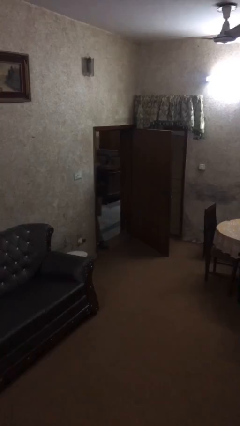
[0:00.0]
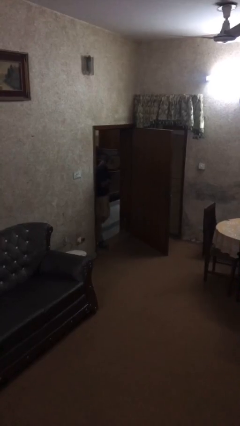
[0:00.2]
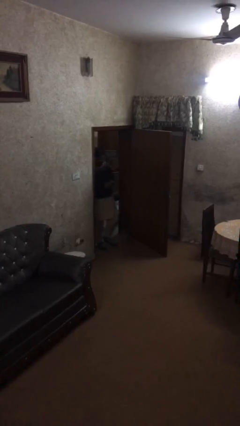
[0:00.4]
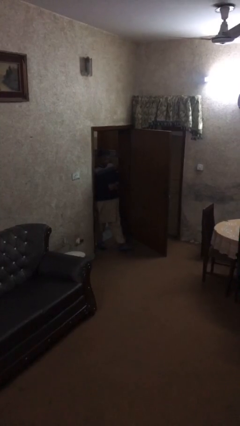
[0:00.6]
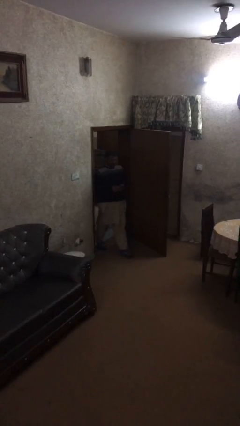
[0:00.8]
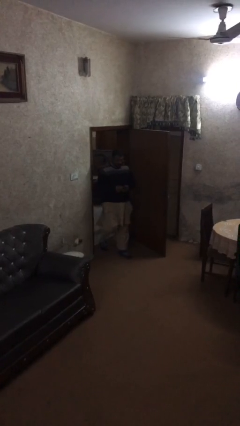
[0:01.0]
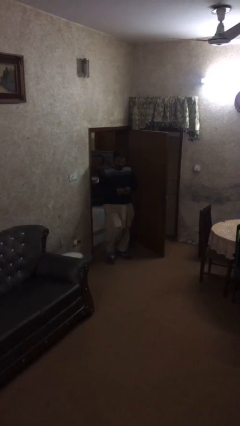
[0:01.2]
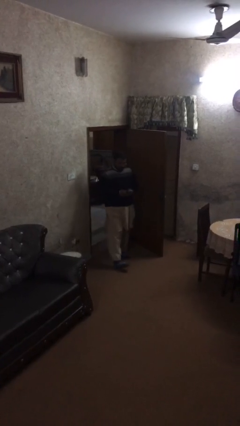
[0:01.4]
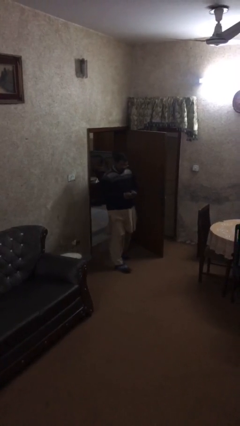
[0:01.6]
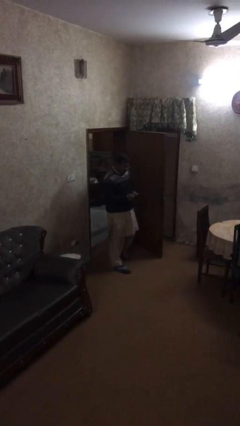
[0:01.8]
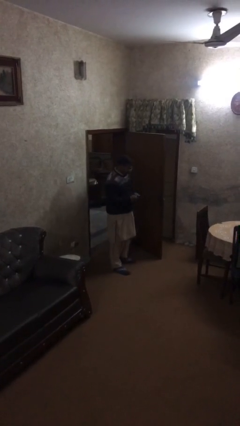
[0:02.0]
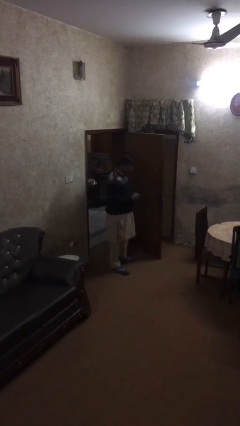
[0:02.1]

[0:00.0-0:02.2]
person enters scene through structure

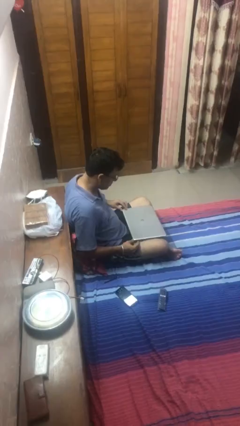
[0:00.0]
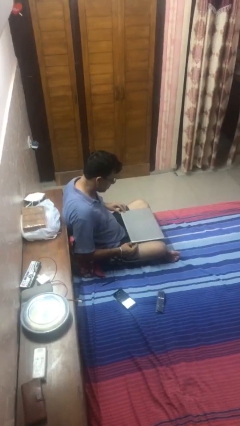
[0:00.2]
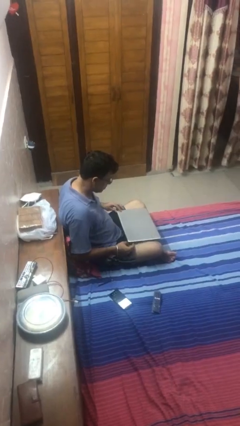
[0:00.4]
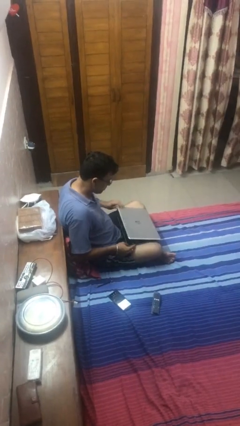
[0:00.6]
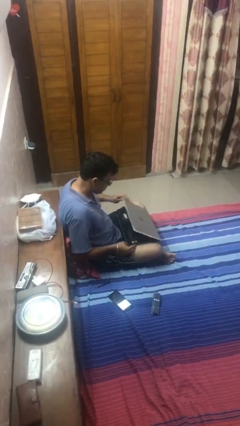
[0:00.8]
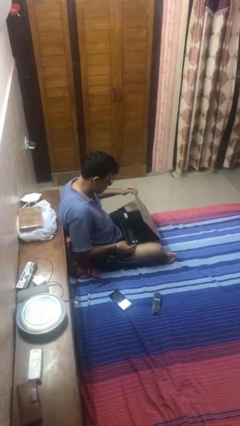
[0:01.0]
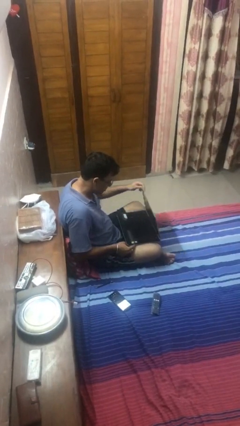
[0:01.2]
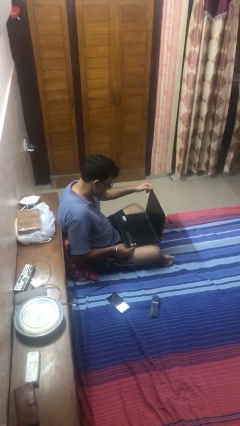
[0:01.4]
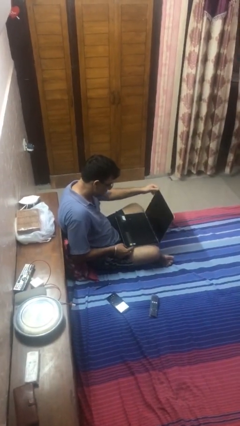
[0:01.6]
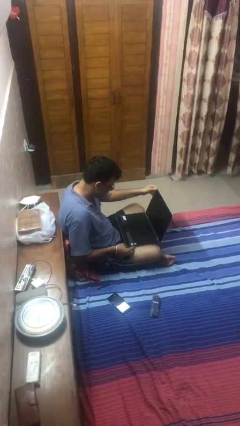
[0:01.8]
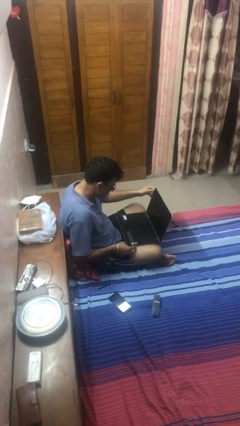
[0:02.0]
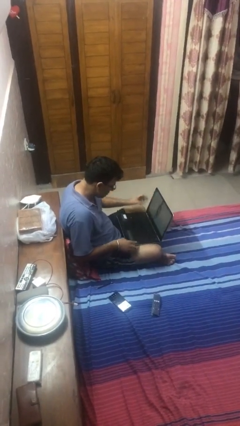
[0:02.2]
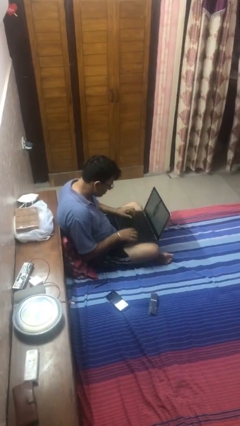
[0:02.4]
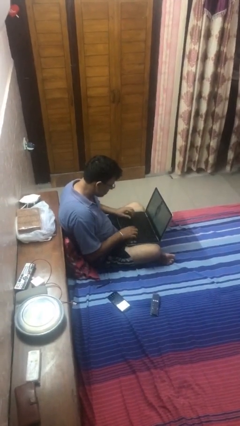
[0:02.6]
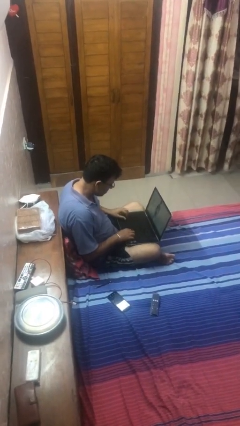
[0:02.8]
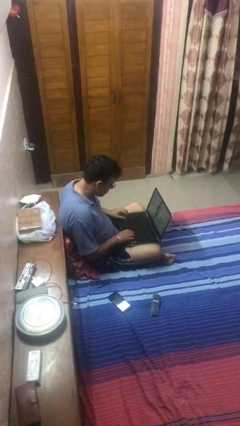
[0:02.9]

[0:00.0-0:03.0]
person opens laptop

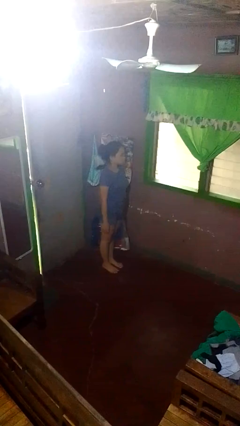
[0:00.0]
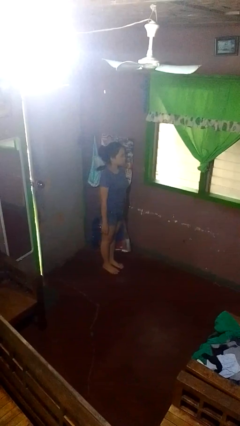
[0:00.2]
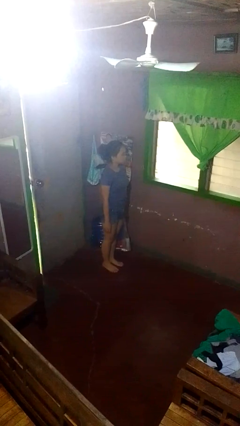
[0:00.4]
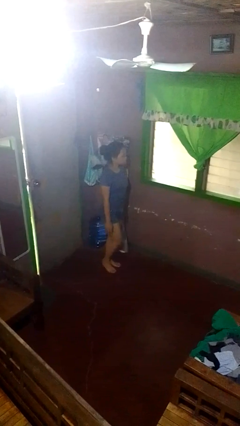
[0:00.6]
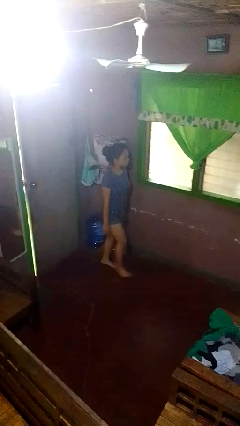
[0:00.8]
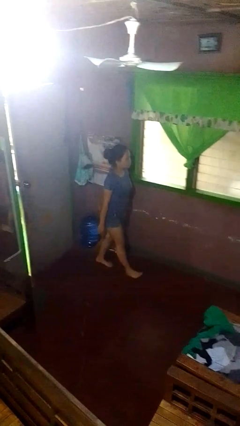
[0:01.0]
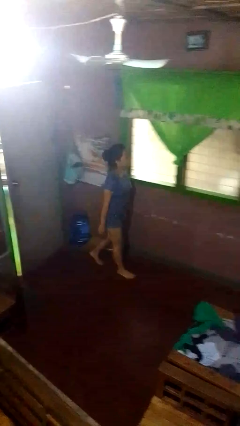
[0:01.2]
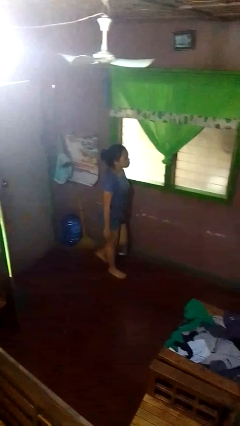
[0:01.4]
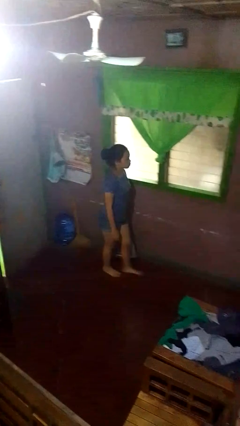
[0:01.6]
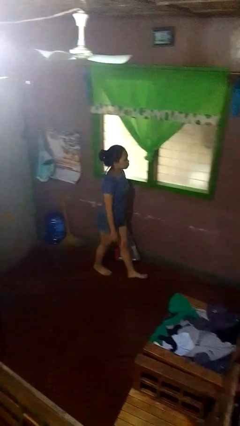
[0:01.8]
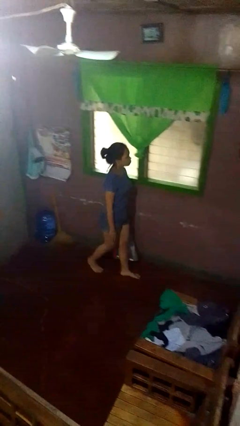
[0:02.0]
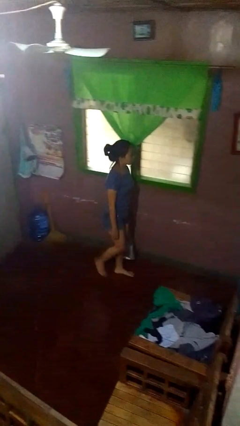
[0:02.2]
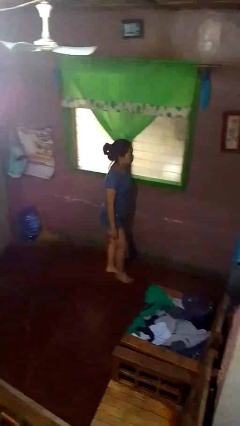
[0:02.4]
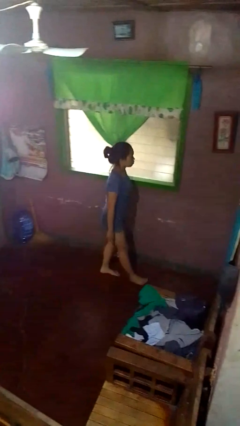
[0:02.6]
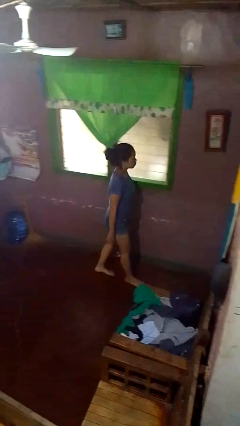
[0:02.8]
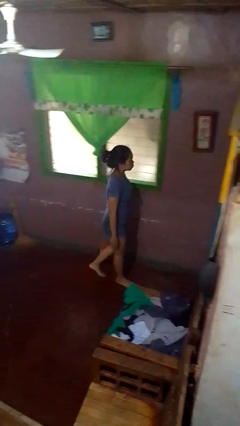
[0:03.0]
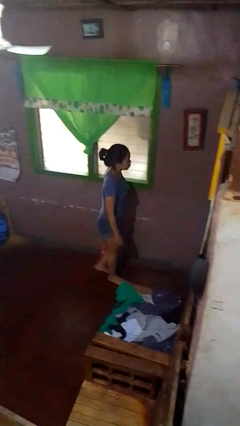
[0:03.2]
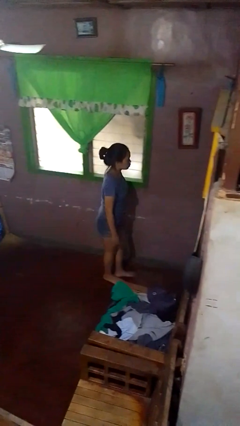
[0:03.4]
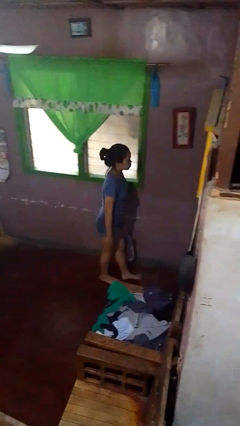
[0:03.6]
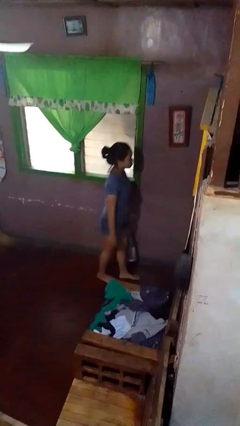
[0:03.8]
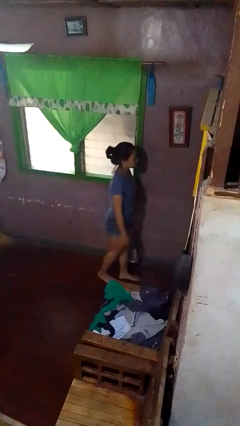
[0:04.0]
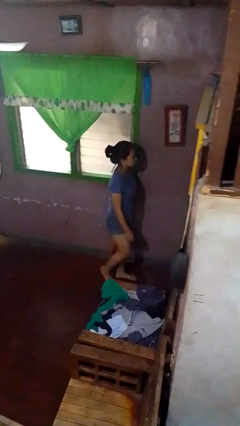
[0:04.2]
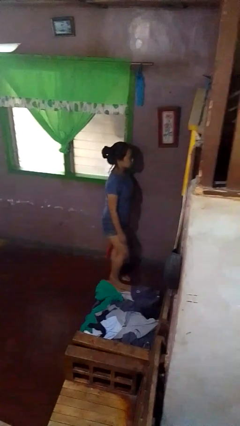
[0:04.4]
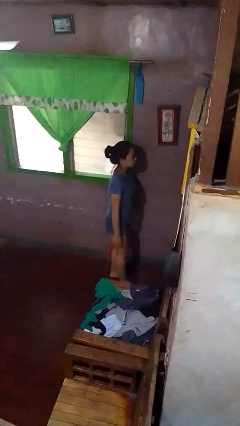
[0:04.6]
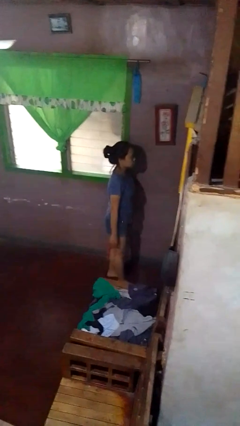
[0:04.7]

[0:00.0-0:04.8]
person carries groceries

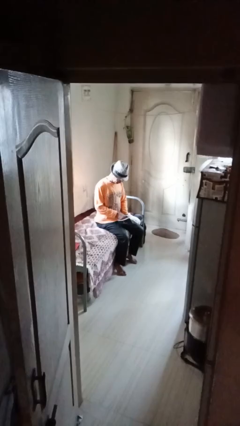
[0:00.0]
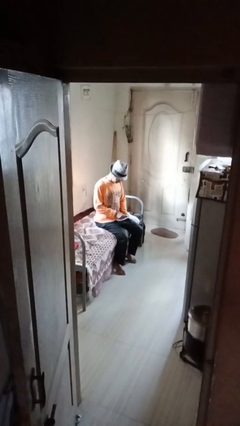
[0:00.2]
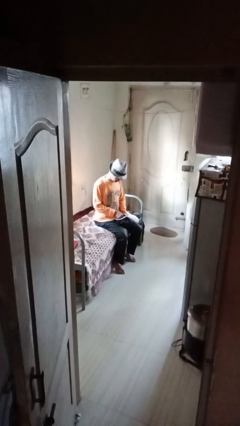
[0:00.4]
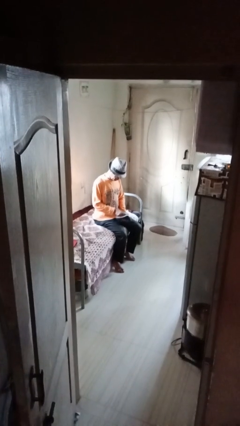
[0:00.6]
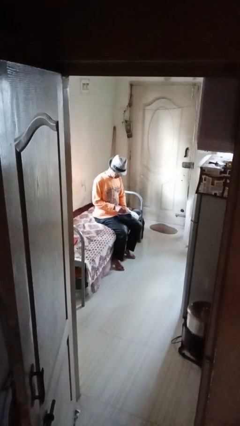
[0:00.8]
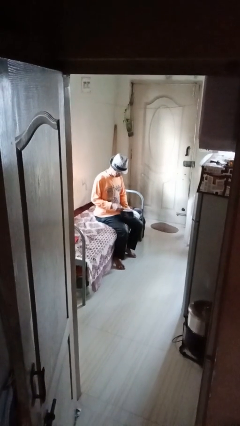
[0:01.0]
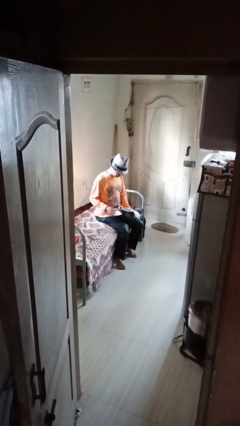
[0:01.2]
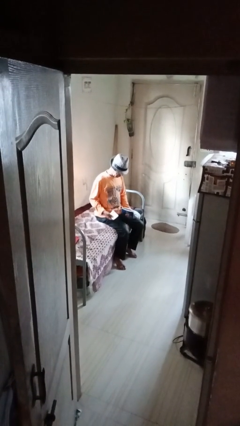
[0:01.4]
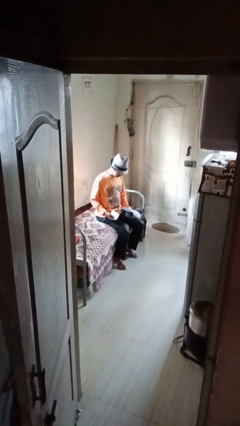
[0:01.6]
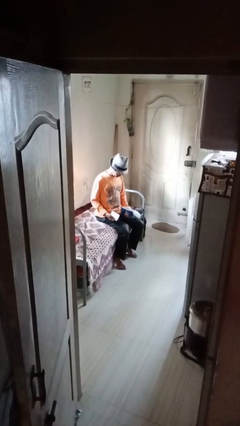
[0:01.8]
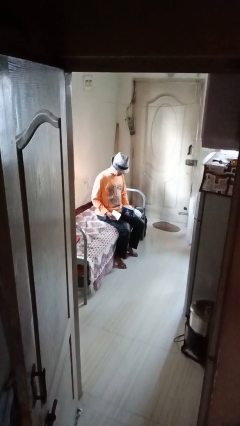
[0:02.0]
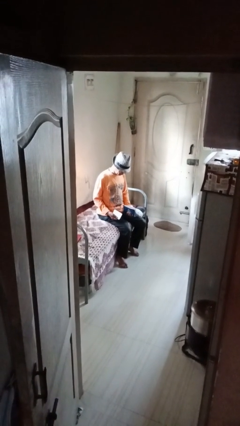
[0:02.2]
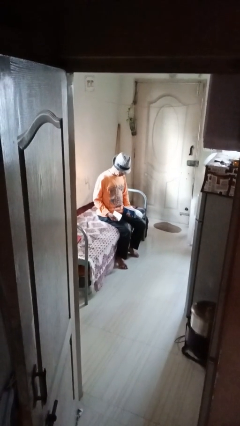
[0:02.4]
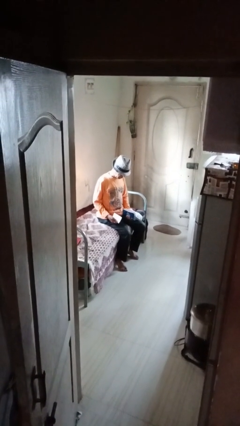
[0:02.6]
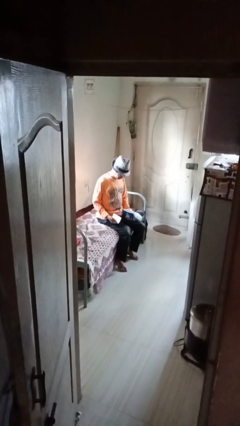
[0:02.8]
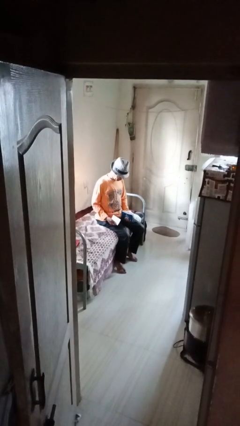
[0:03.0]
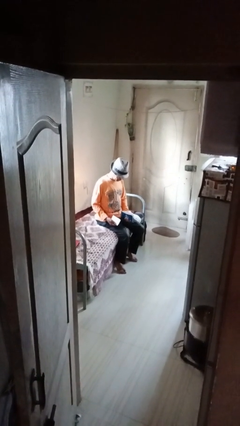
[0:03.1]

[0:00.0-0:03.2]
person takes object from purse

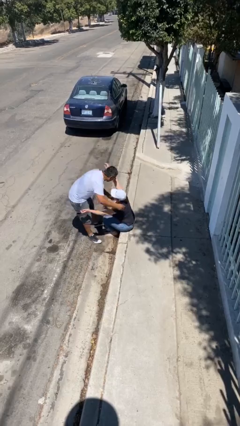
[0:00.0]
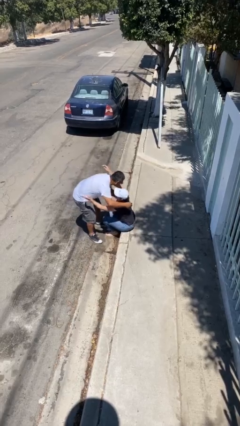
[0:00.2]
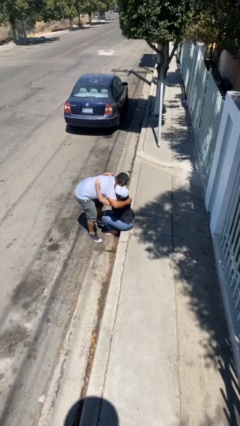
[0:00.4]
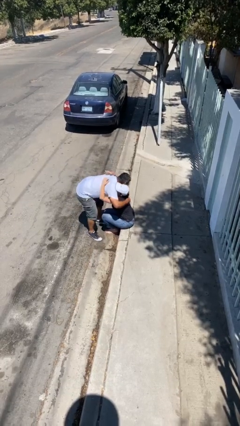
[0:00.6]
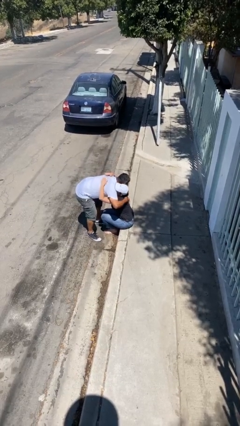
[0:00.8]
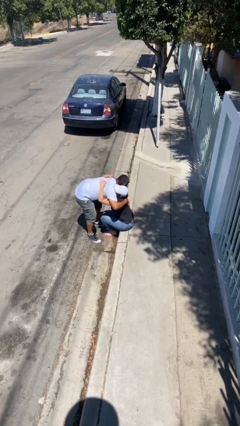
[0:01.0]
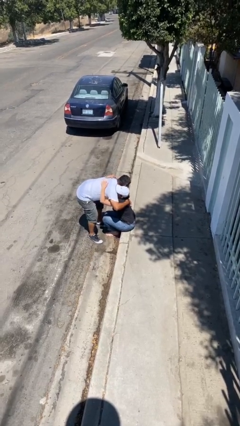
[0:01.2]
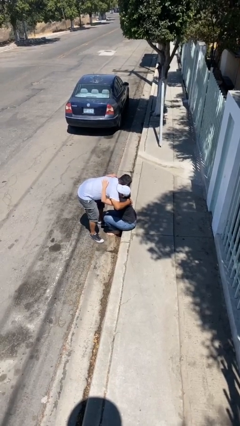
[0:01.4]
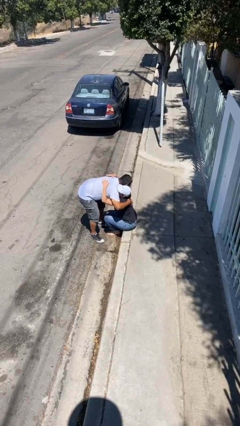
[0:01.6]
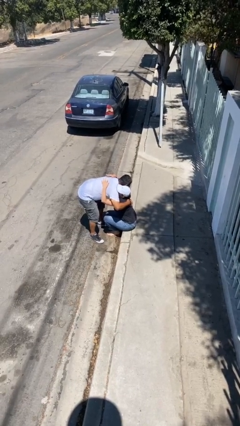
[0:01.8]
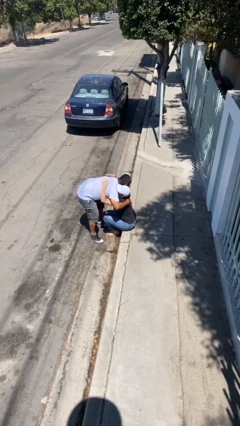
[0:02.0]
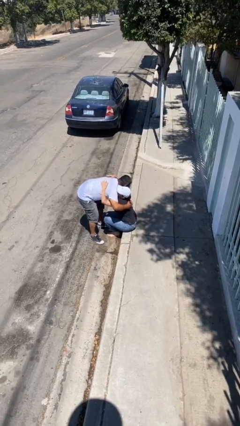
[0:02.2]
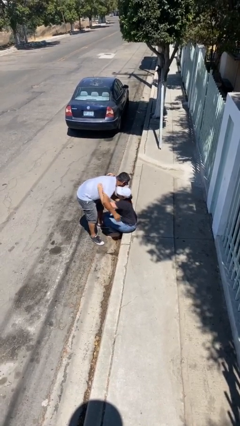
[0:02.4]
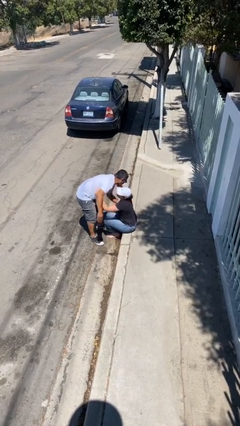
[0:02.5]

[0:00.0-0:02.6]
person embraces person

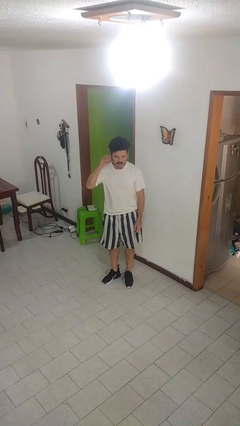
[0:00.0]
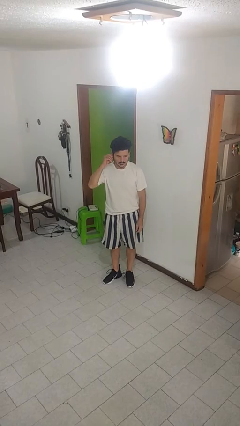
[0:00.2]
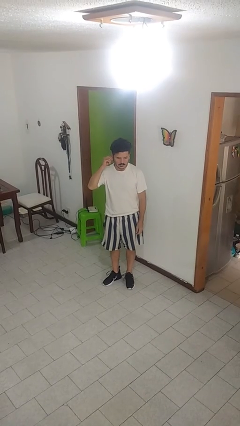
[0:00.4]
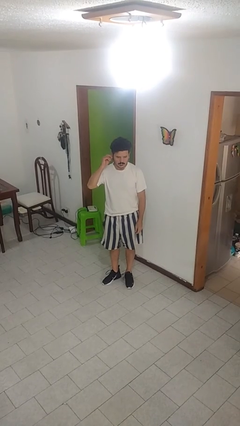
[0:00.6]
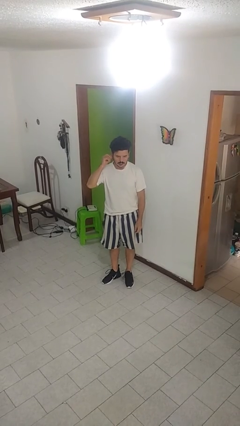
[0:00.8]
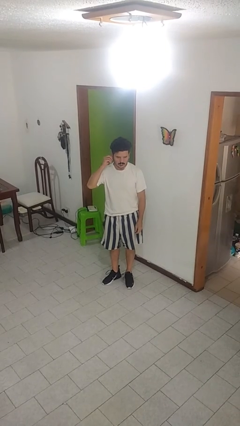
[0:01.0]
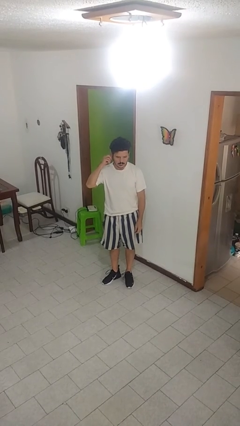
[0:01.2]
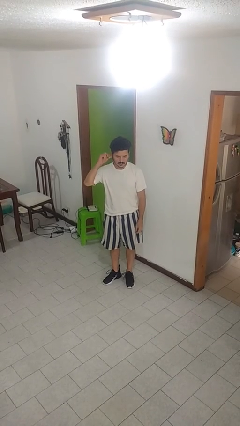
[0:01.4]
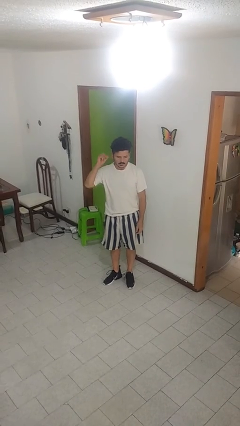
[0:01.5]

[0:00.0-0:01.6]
person touches earlobe
